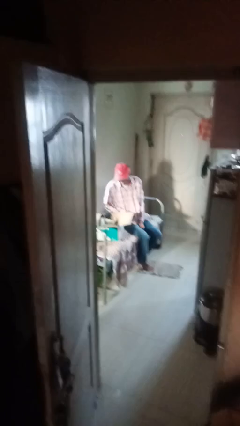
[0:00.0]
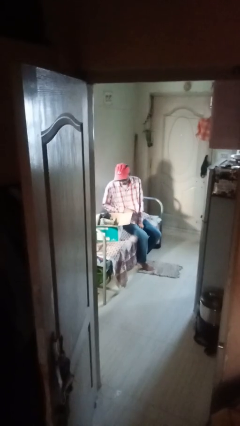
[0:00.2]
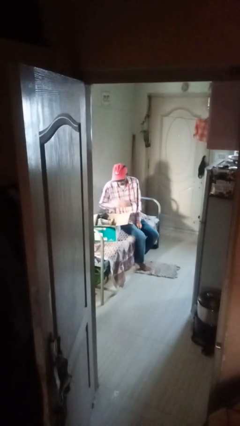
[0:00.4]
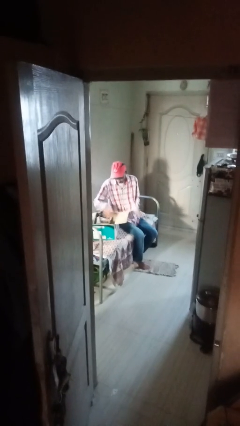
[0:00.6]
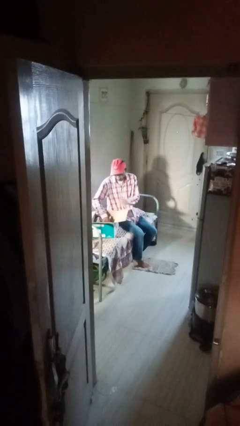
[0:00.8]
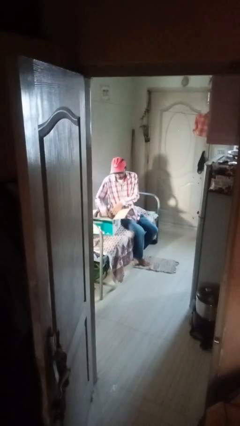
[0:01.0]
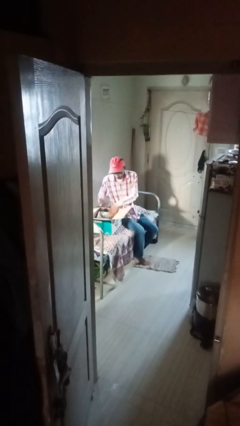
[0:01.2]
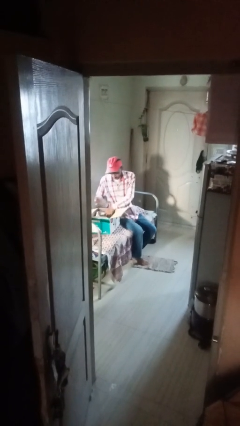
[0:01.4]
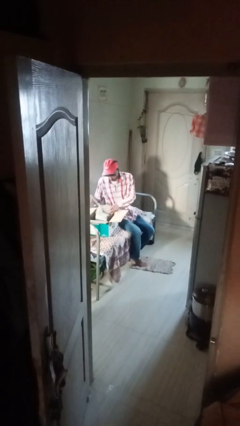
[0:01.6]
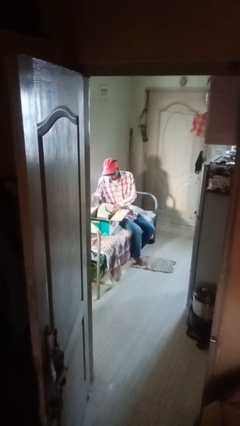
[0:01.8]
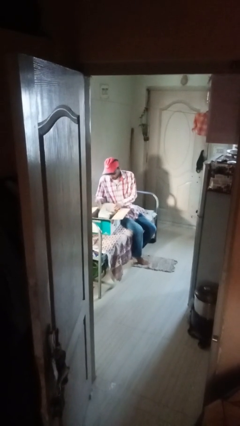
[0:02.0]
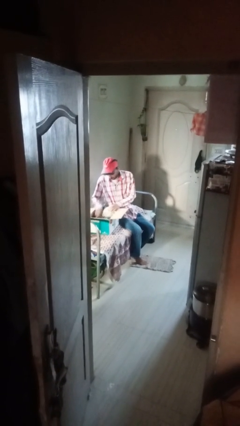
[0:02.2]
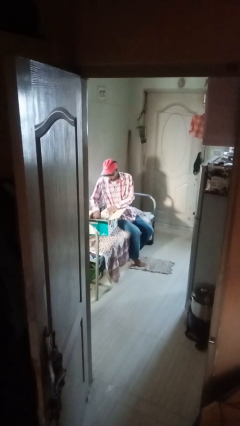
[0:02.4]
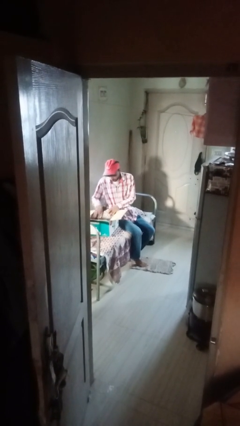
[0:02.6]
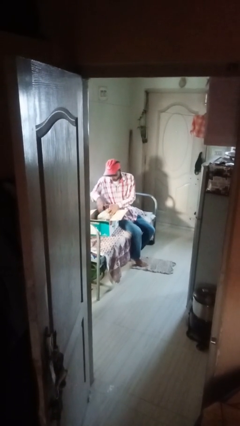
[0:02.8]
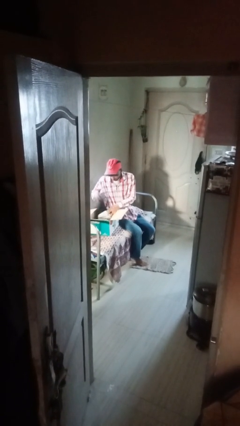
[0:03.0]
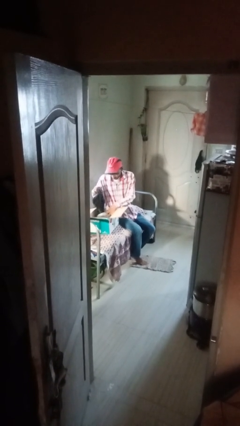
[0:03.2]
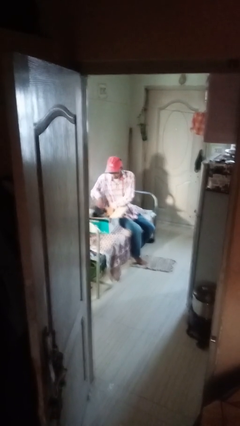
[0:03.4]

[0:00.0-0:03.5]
person searches in box

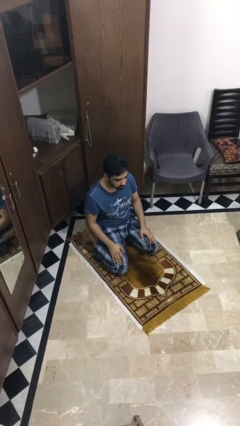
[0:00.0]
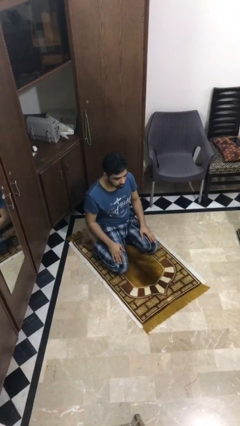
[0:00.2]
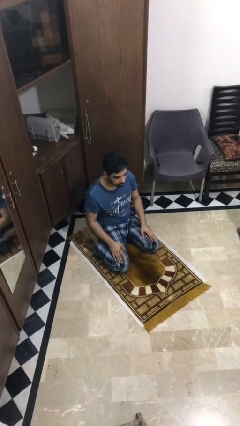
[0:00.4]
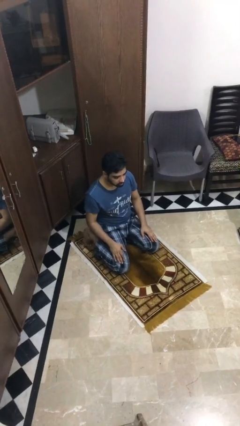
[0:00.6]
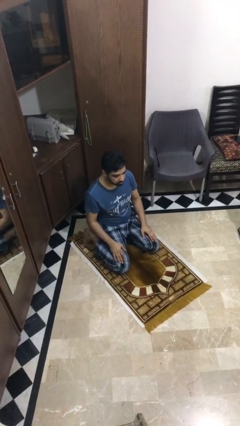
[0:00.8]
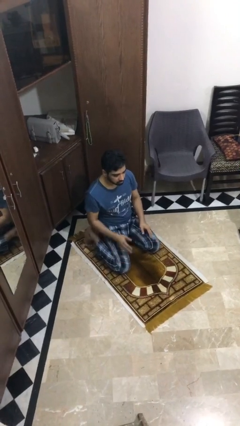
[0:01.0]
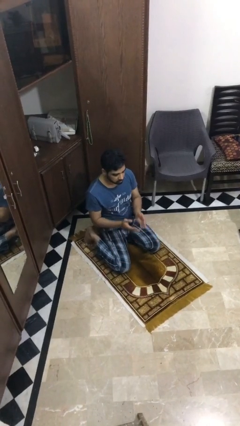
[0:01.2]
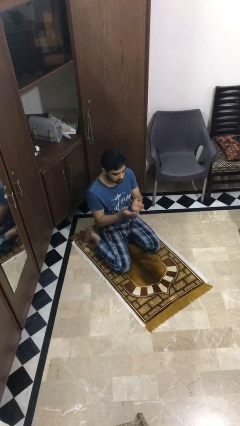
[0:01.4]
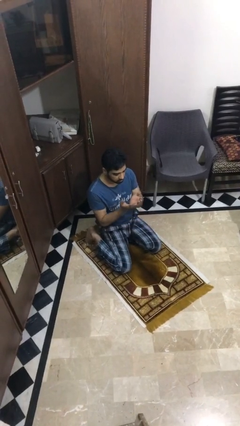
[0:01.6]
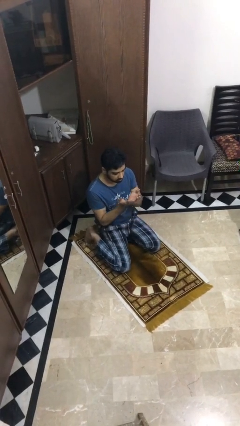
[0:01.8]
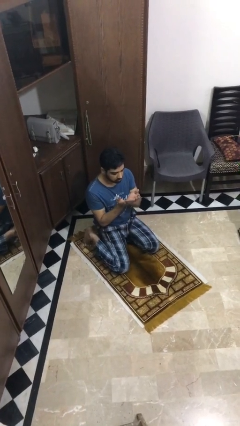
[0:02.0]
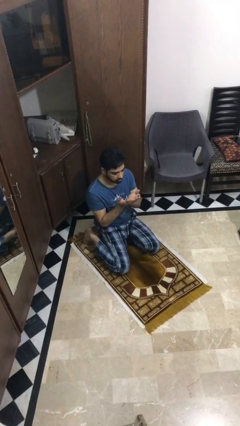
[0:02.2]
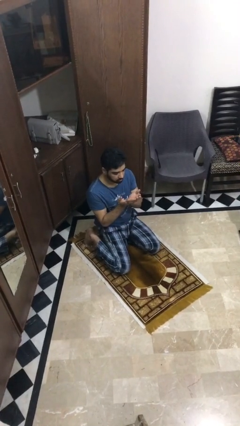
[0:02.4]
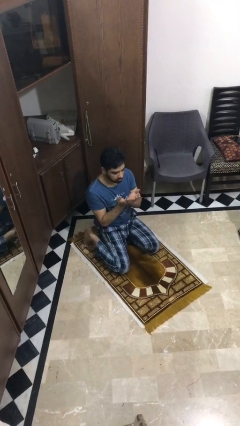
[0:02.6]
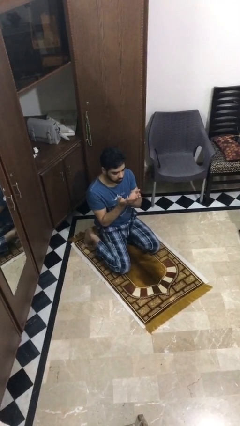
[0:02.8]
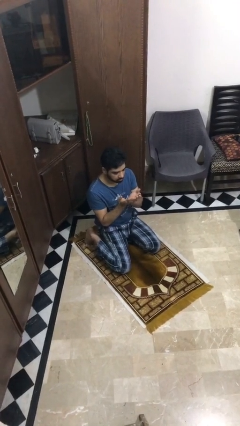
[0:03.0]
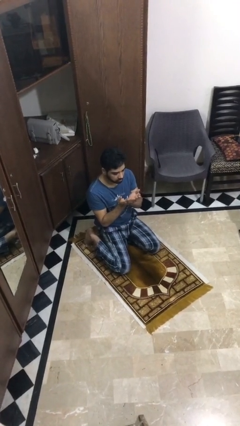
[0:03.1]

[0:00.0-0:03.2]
person prays

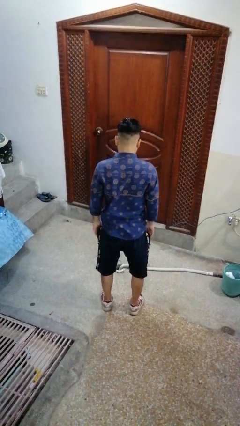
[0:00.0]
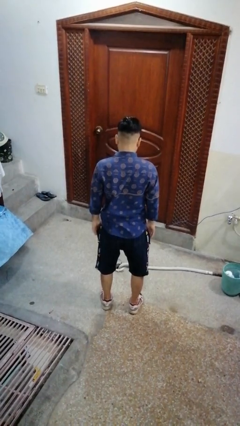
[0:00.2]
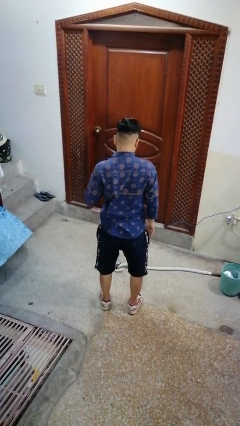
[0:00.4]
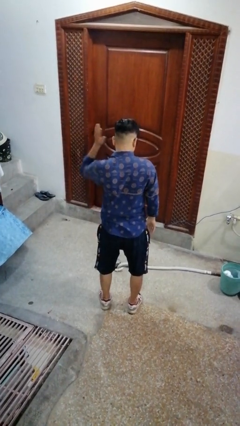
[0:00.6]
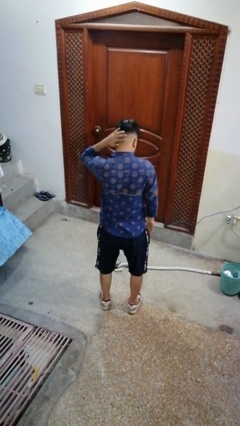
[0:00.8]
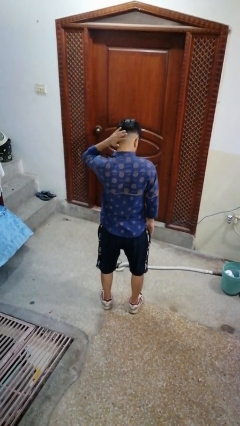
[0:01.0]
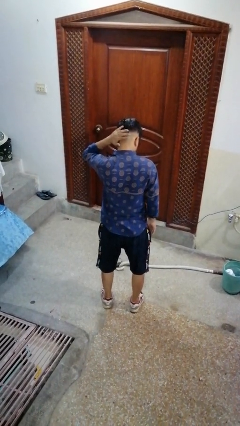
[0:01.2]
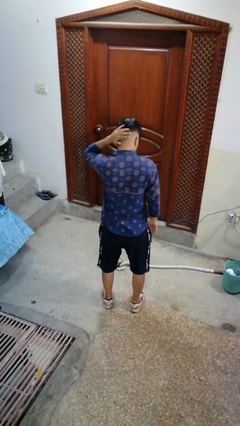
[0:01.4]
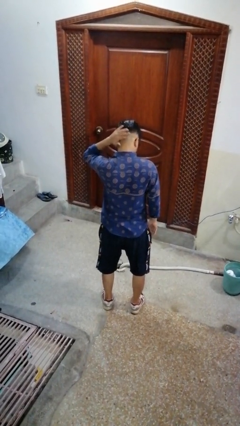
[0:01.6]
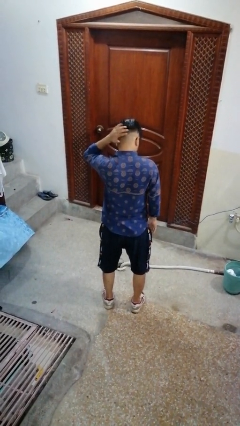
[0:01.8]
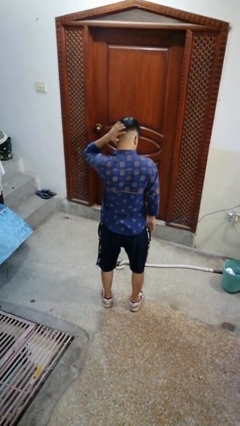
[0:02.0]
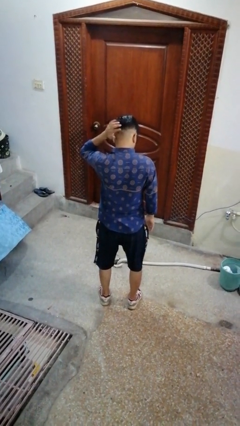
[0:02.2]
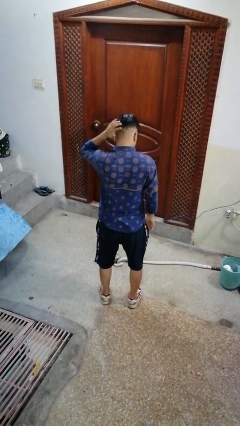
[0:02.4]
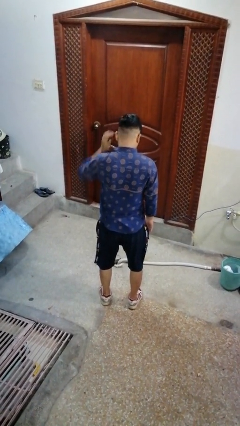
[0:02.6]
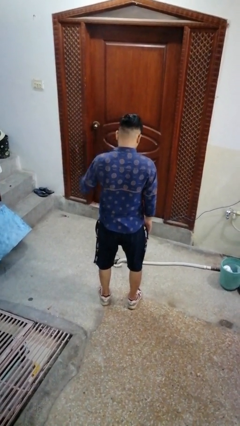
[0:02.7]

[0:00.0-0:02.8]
person pats head

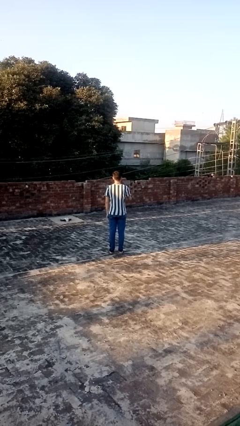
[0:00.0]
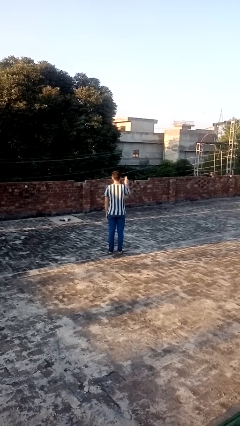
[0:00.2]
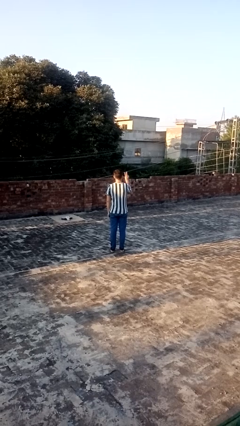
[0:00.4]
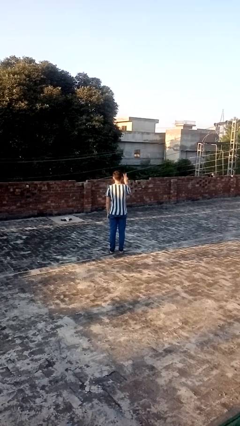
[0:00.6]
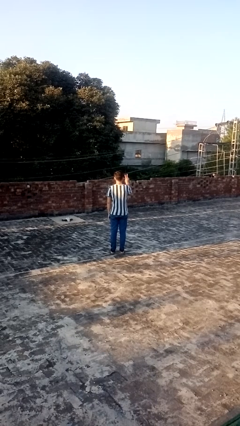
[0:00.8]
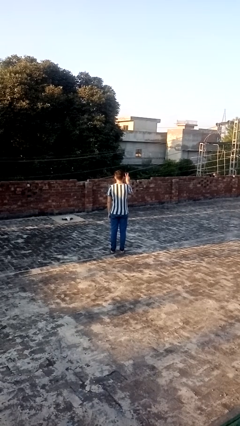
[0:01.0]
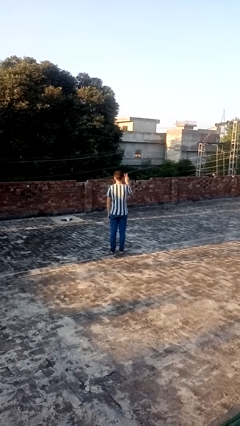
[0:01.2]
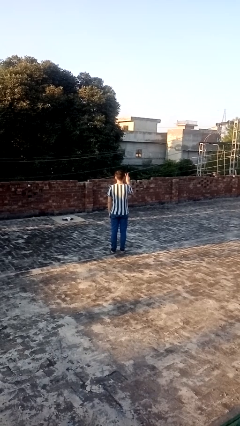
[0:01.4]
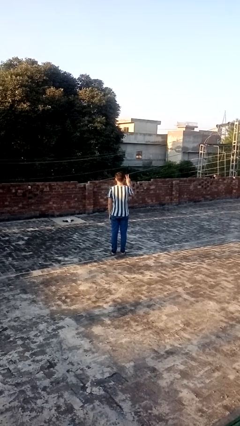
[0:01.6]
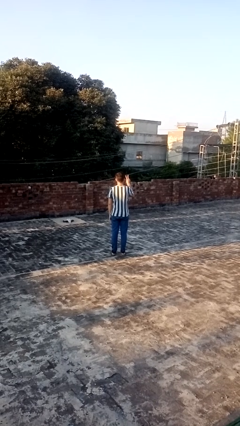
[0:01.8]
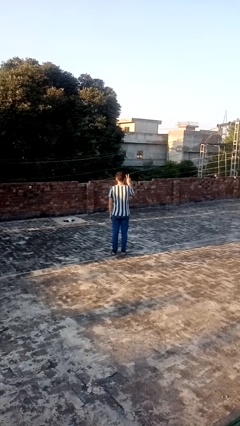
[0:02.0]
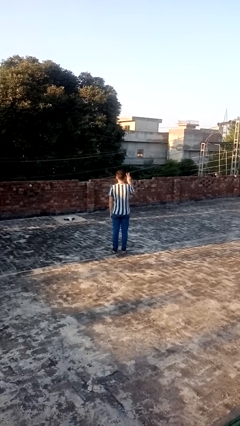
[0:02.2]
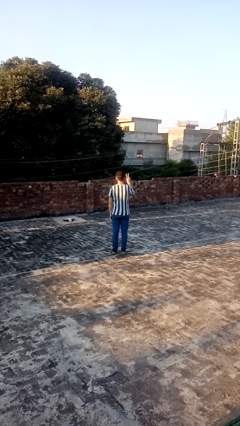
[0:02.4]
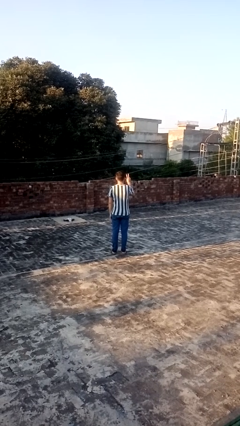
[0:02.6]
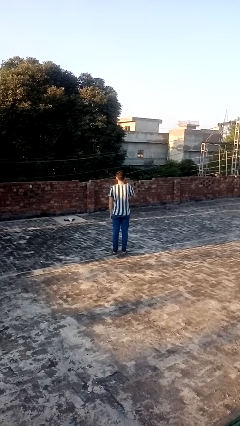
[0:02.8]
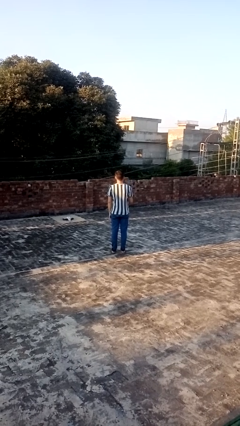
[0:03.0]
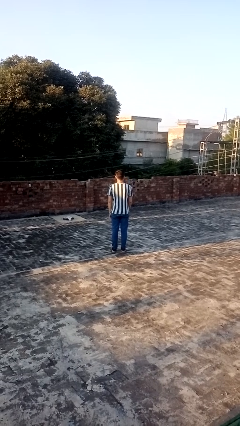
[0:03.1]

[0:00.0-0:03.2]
person gestures peace

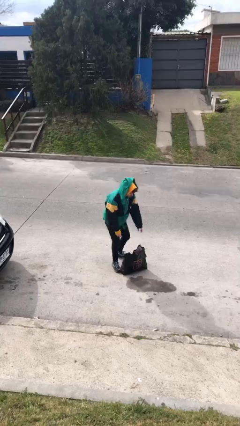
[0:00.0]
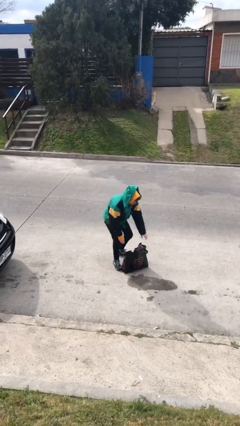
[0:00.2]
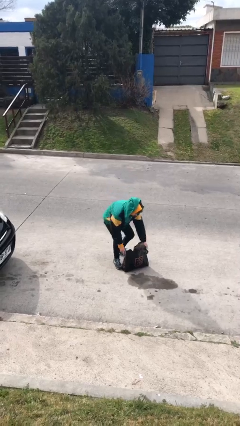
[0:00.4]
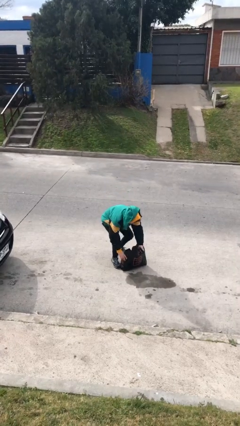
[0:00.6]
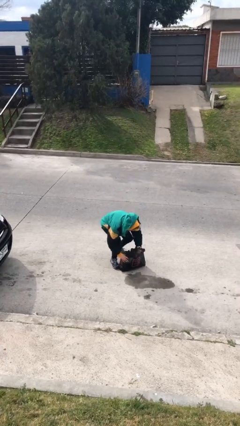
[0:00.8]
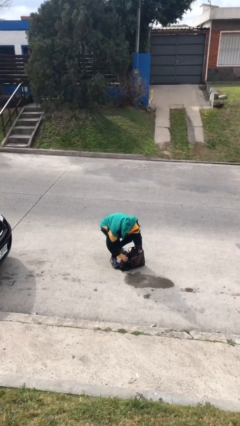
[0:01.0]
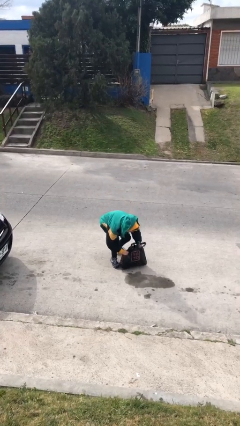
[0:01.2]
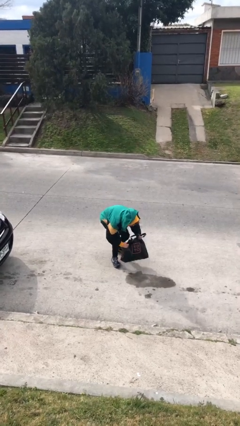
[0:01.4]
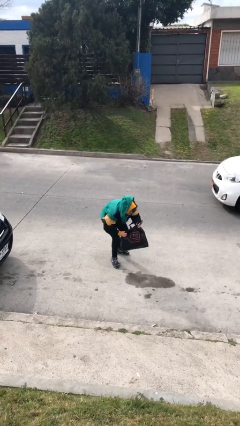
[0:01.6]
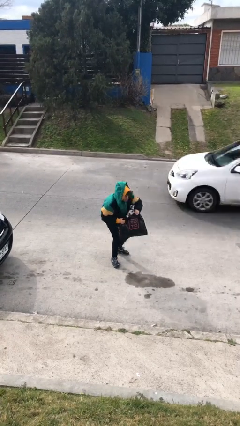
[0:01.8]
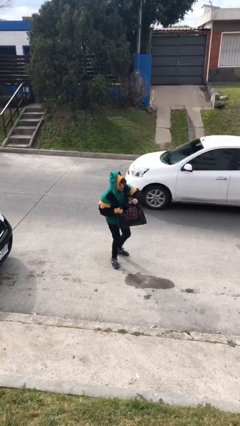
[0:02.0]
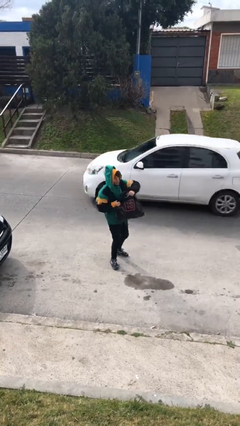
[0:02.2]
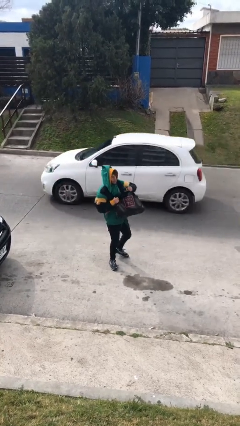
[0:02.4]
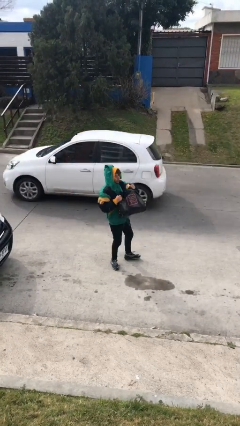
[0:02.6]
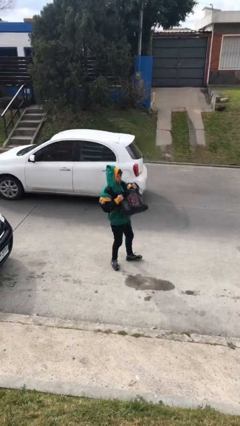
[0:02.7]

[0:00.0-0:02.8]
person picks up object from floor

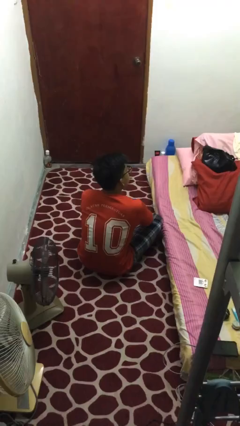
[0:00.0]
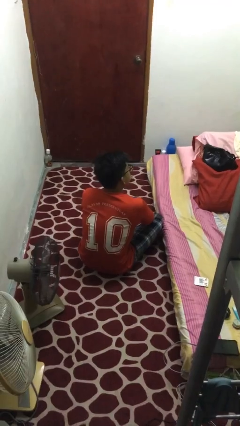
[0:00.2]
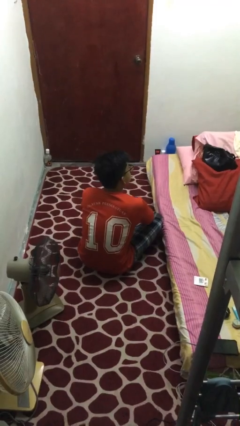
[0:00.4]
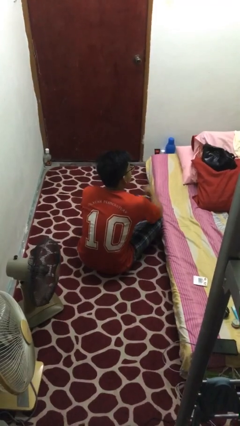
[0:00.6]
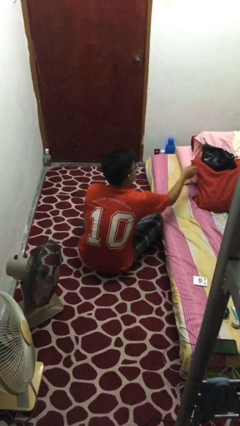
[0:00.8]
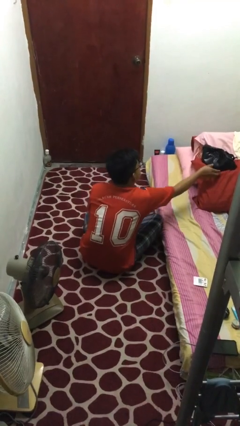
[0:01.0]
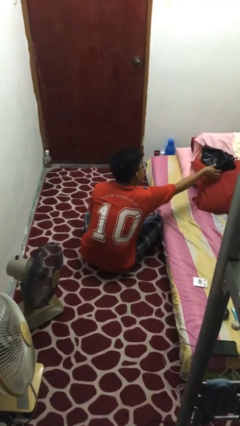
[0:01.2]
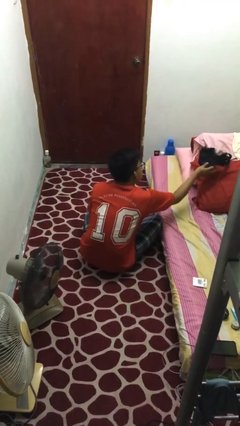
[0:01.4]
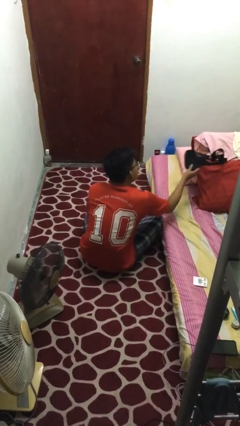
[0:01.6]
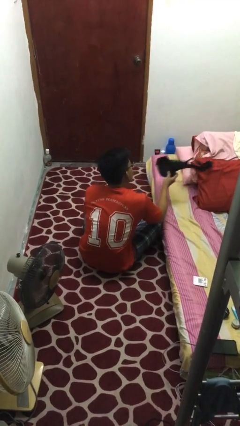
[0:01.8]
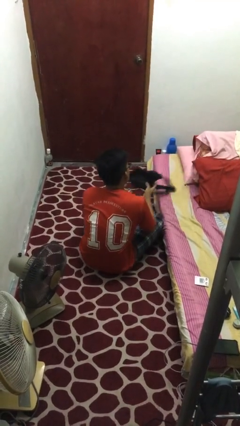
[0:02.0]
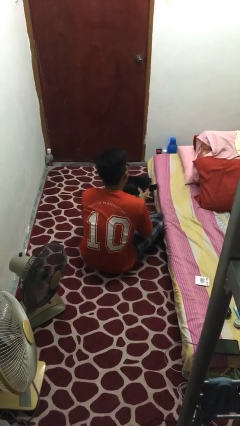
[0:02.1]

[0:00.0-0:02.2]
person picks up object from bed
